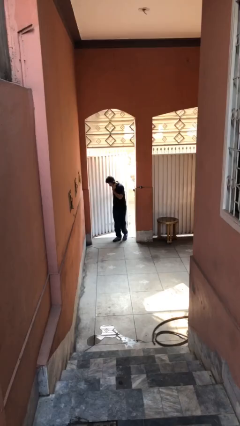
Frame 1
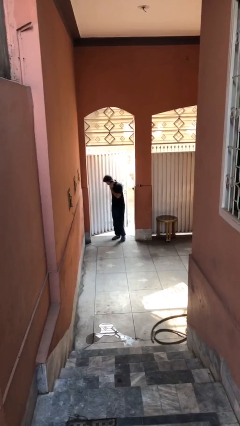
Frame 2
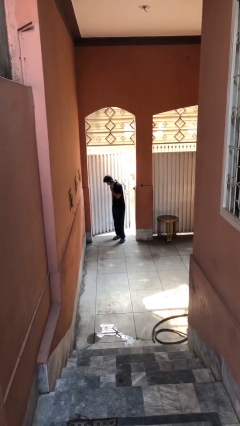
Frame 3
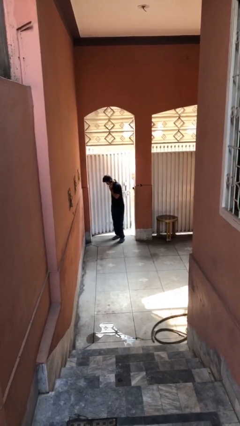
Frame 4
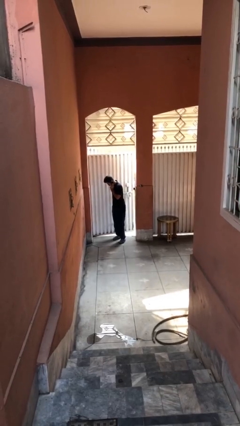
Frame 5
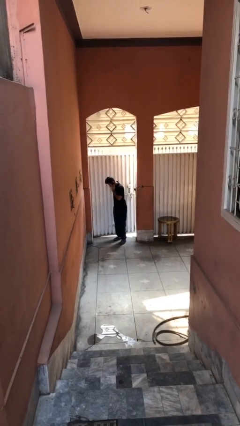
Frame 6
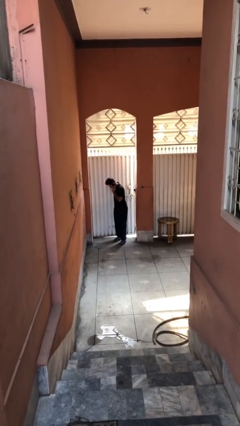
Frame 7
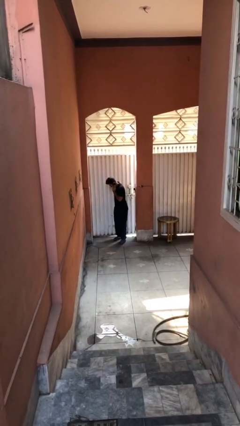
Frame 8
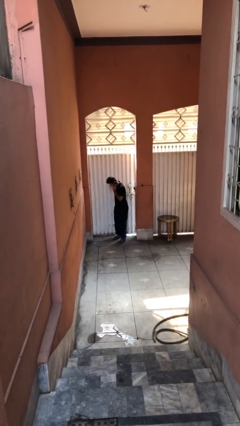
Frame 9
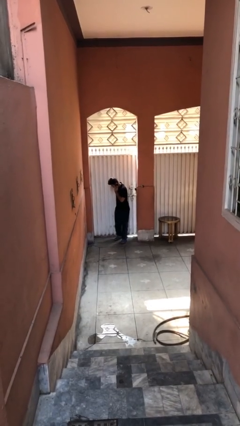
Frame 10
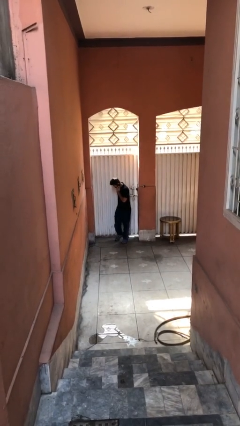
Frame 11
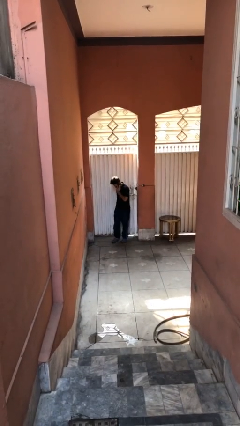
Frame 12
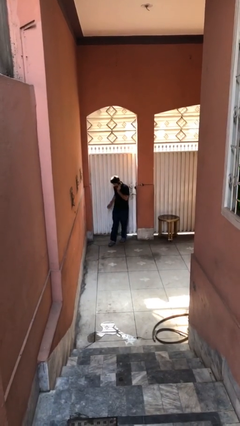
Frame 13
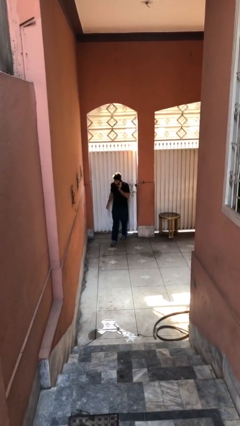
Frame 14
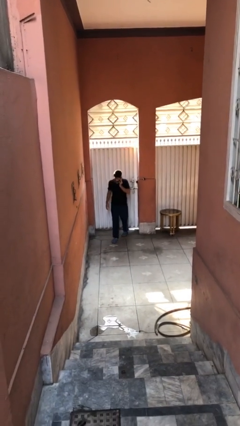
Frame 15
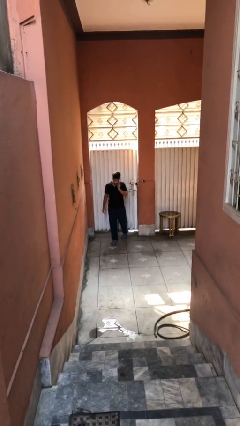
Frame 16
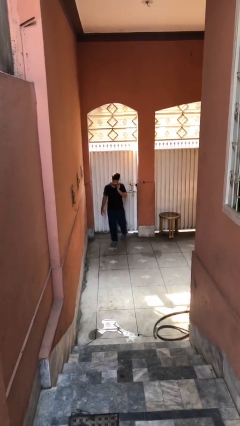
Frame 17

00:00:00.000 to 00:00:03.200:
person closes facility door

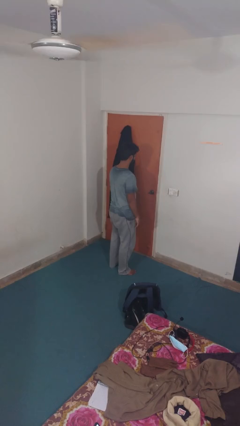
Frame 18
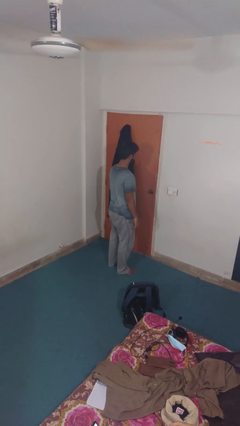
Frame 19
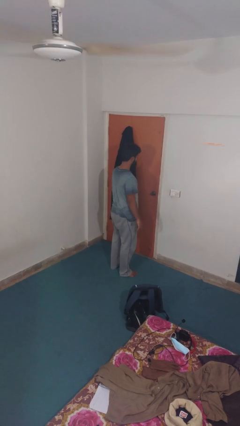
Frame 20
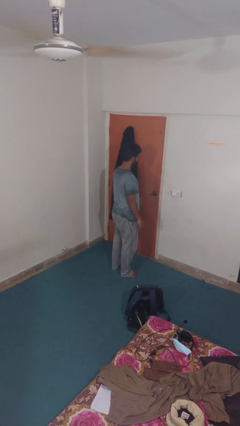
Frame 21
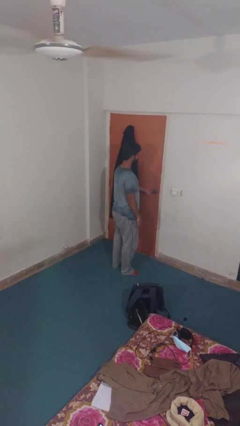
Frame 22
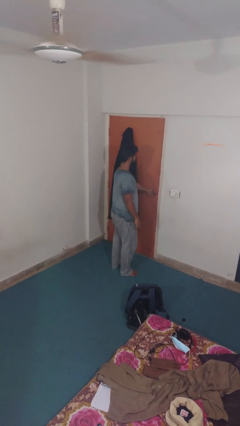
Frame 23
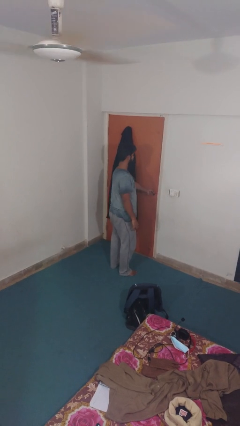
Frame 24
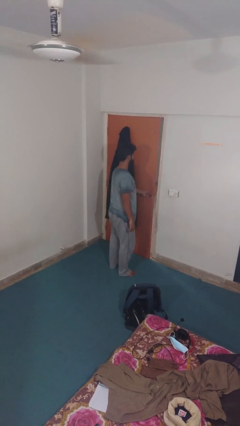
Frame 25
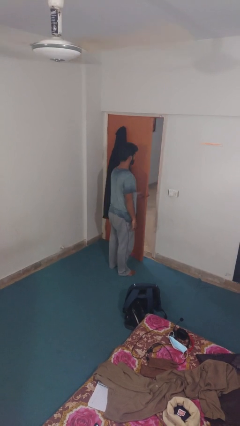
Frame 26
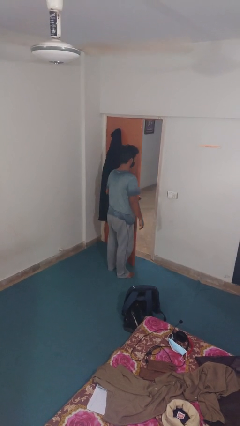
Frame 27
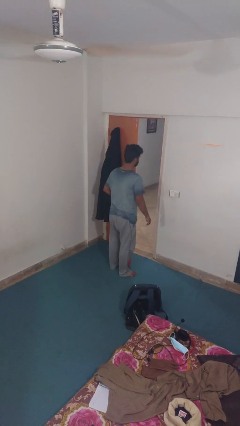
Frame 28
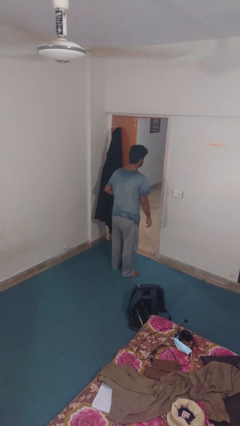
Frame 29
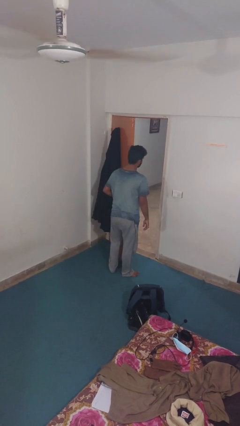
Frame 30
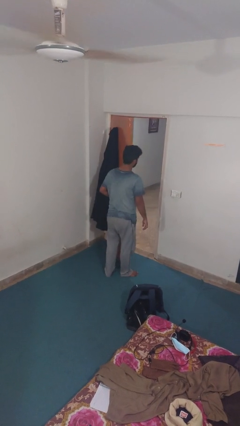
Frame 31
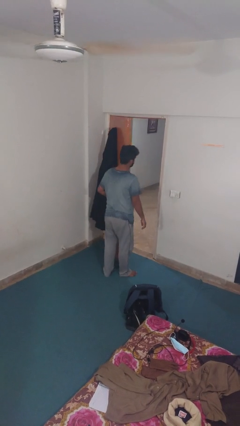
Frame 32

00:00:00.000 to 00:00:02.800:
person opens facility door

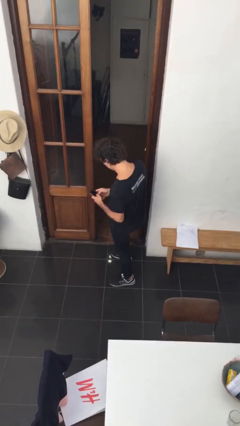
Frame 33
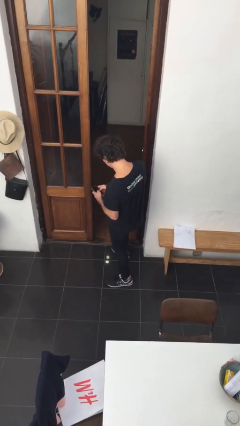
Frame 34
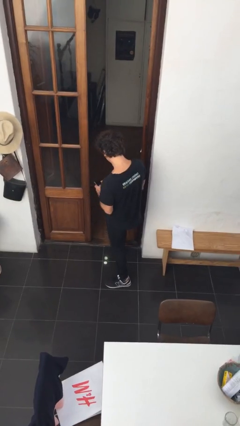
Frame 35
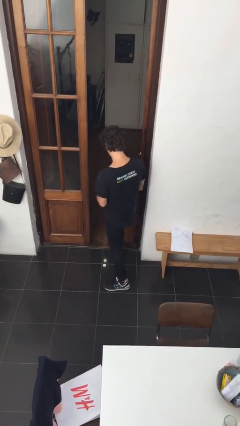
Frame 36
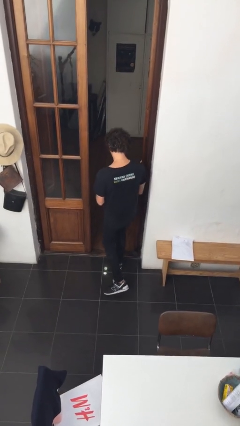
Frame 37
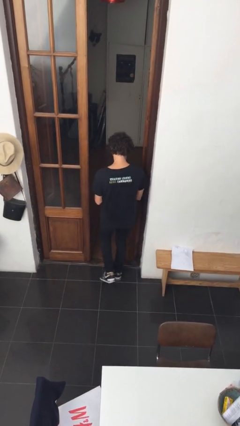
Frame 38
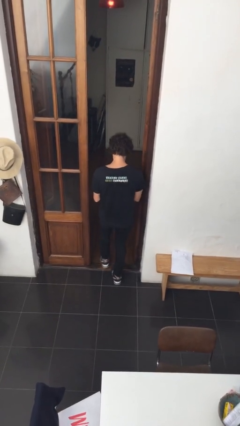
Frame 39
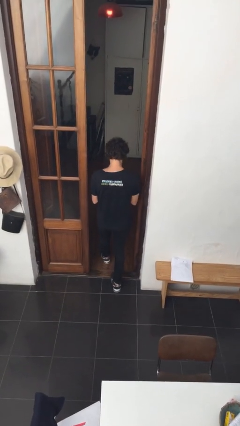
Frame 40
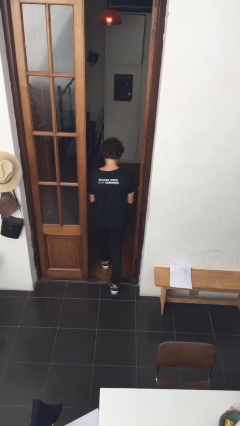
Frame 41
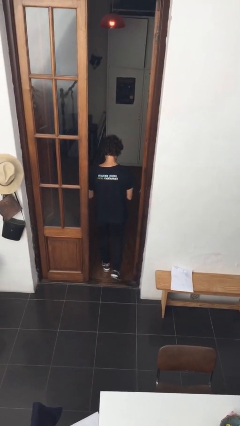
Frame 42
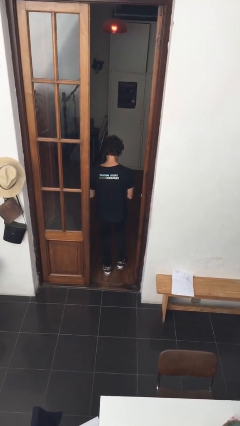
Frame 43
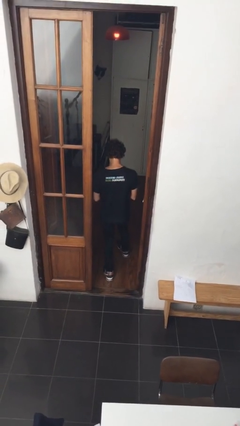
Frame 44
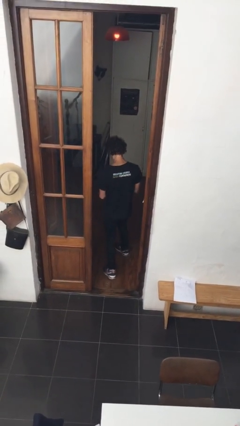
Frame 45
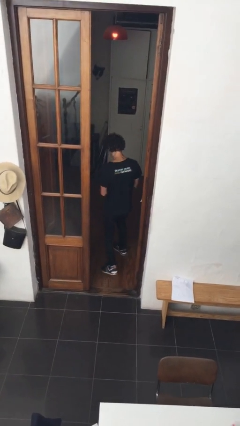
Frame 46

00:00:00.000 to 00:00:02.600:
person exits scene through structure

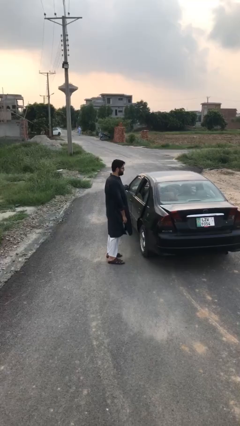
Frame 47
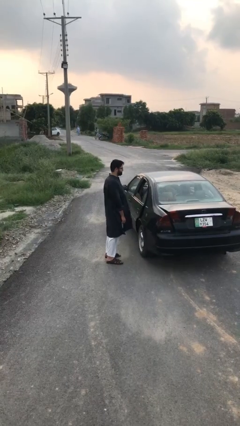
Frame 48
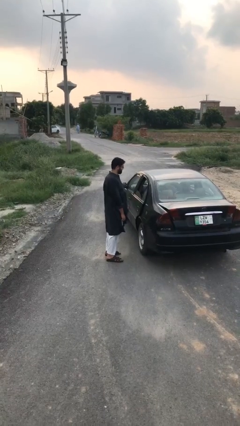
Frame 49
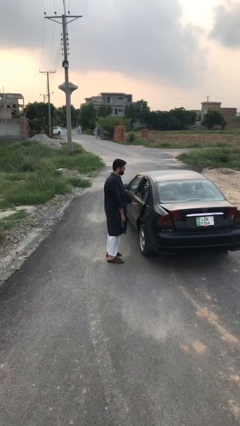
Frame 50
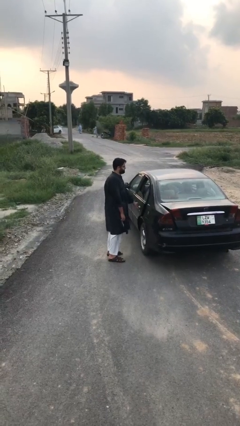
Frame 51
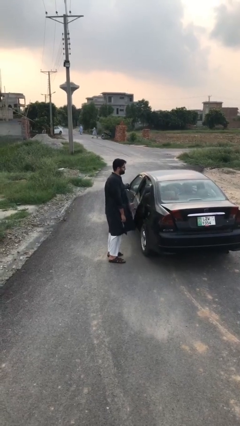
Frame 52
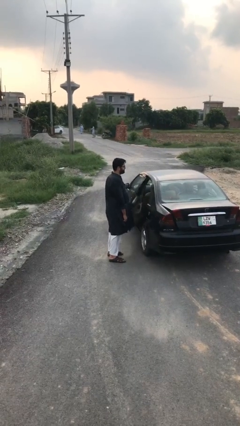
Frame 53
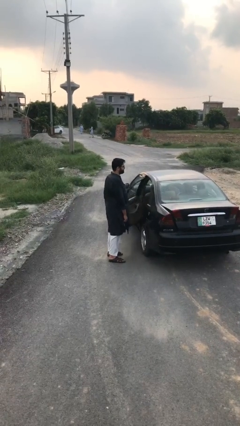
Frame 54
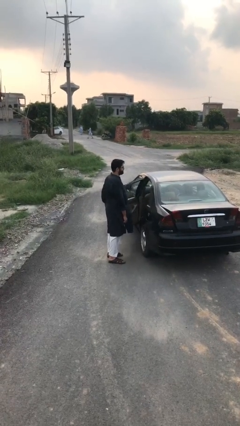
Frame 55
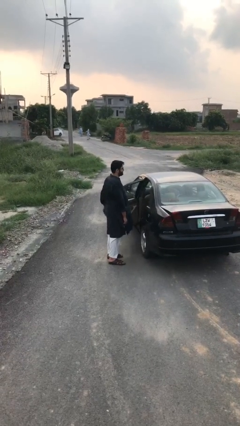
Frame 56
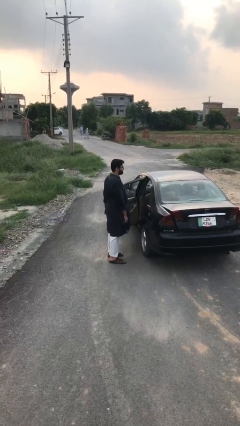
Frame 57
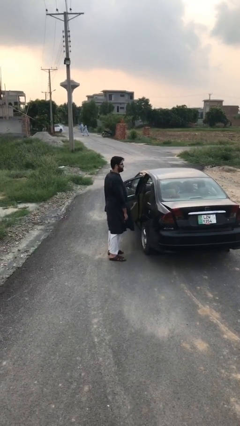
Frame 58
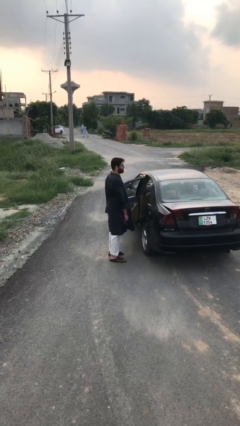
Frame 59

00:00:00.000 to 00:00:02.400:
person opens car door

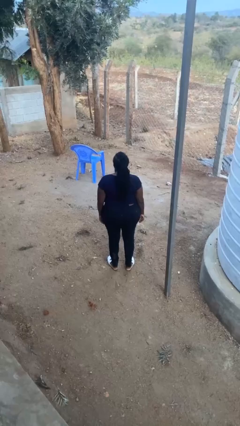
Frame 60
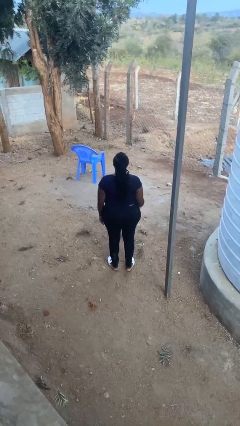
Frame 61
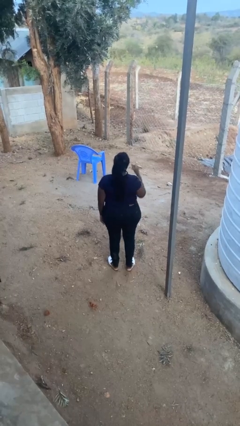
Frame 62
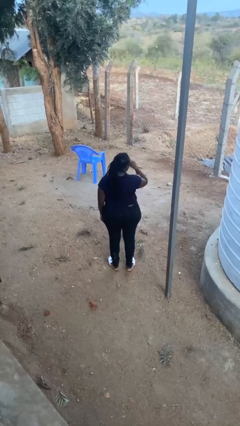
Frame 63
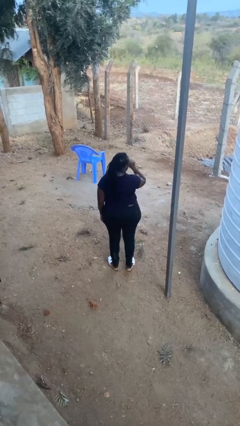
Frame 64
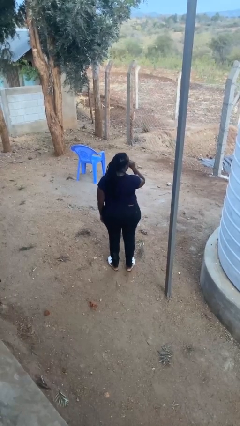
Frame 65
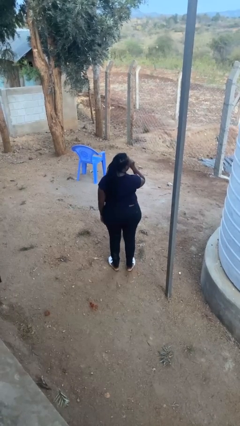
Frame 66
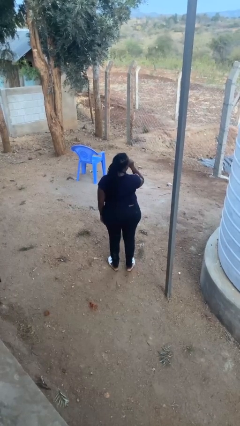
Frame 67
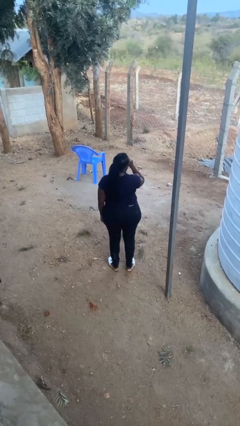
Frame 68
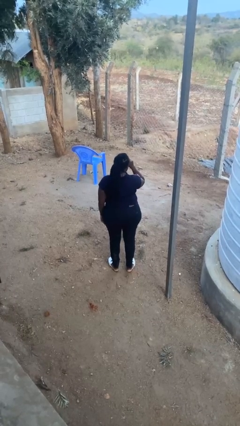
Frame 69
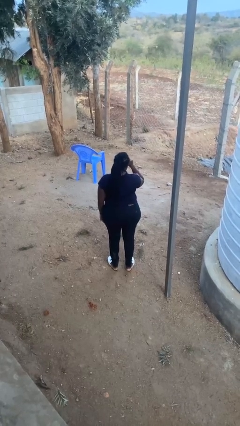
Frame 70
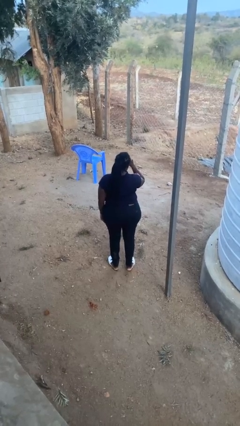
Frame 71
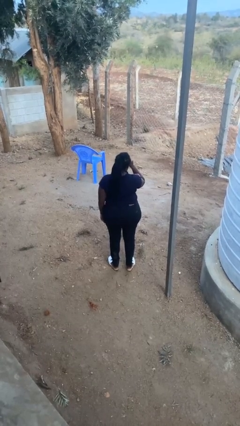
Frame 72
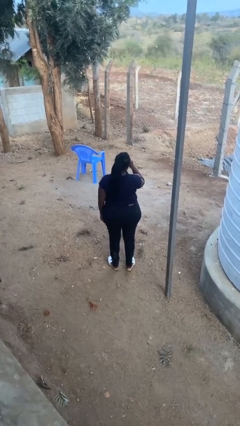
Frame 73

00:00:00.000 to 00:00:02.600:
person rubs eyes

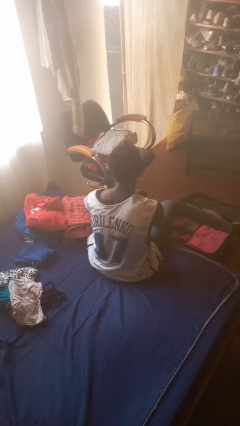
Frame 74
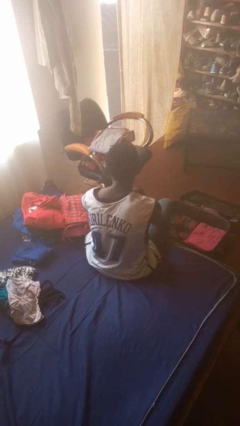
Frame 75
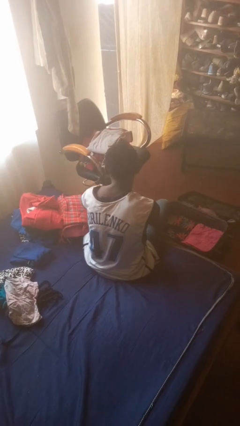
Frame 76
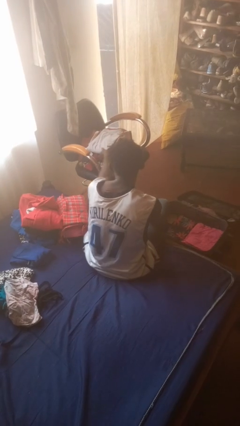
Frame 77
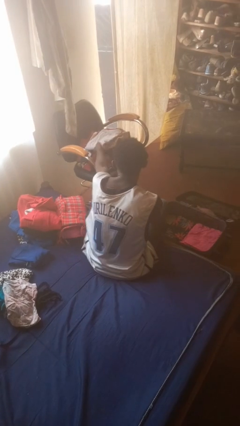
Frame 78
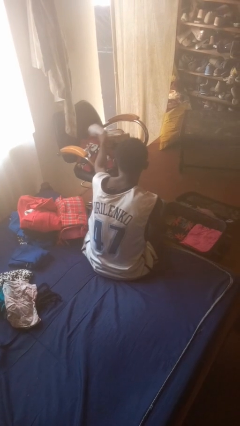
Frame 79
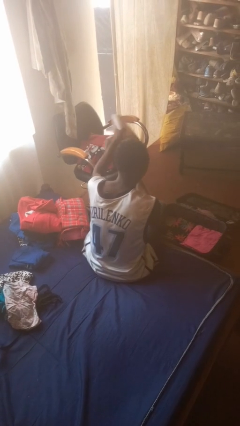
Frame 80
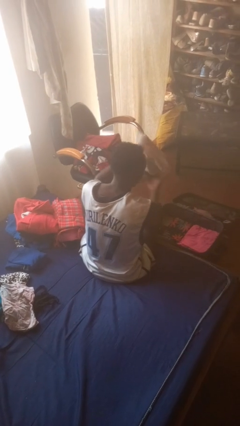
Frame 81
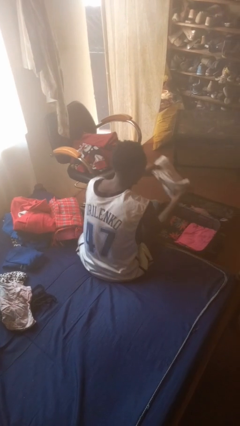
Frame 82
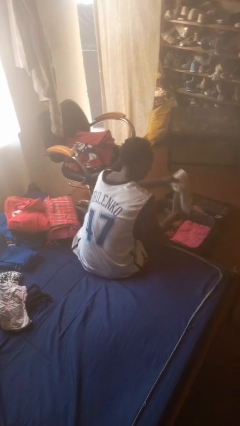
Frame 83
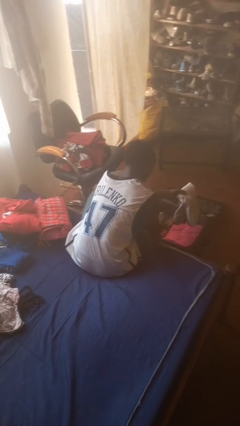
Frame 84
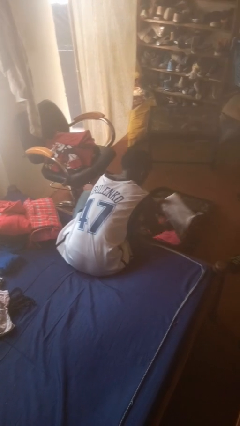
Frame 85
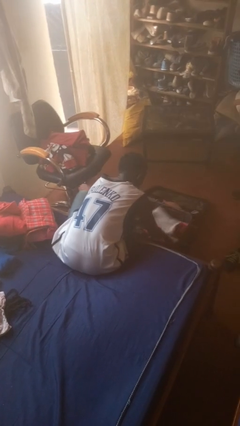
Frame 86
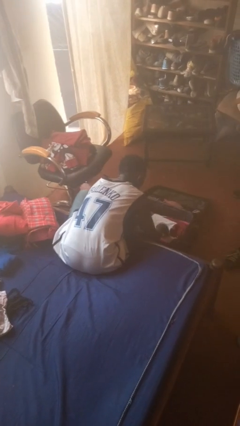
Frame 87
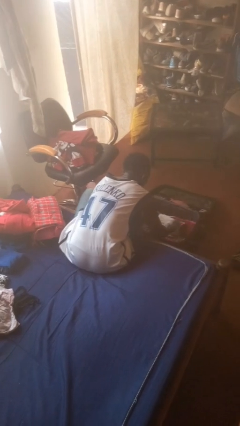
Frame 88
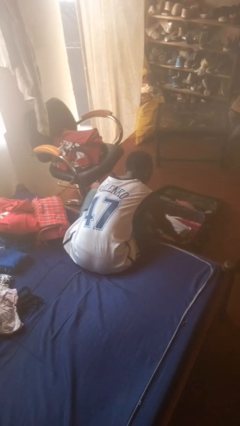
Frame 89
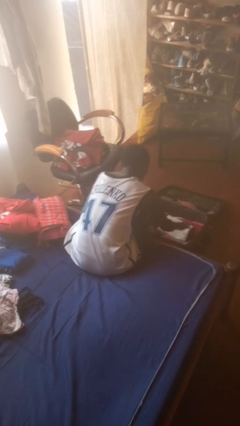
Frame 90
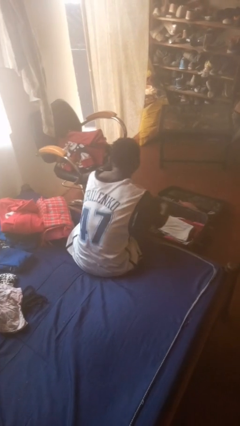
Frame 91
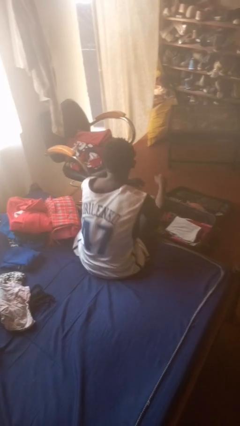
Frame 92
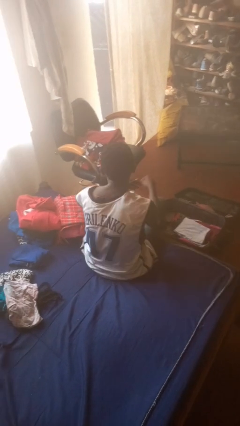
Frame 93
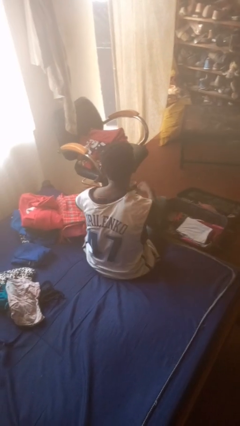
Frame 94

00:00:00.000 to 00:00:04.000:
person loads clothes into suitcase
